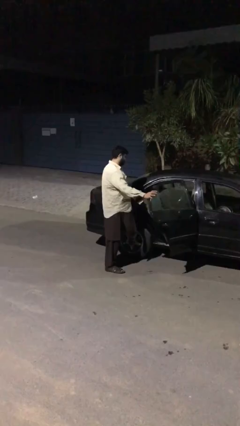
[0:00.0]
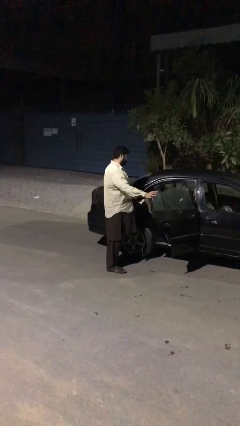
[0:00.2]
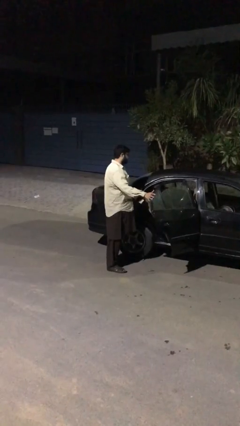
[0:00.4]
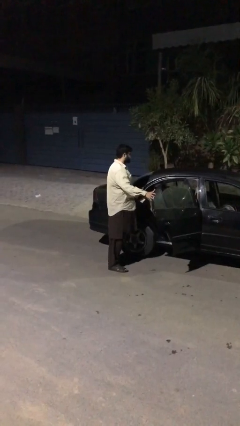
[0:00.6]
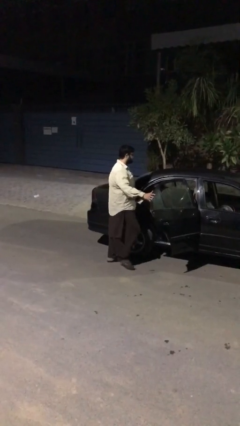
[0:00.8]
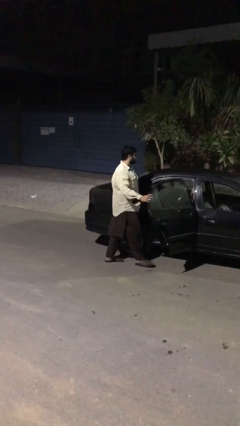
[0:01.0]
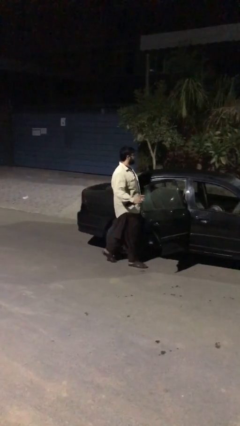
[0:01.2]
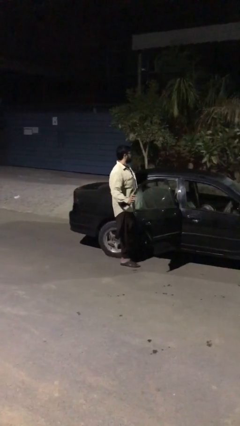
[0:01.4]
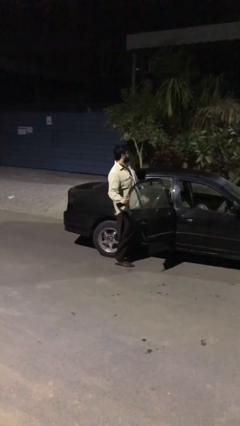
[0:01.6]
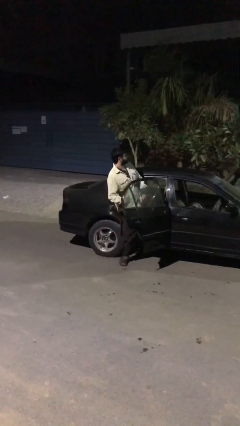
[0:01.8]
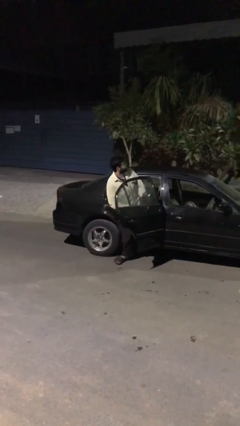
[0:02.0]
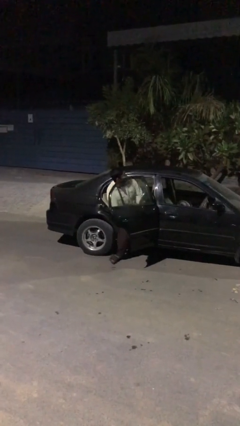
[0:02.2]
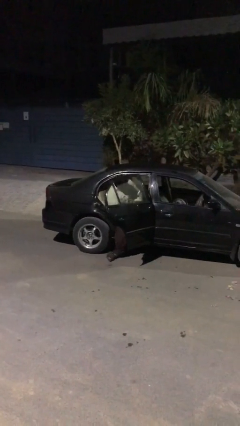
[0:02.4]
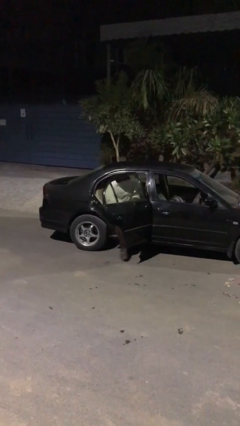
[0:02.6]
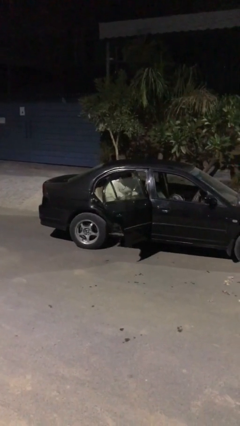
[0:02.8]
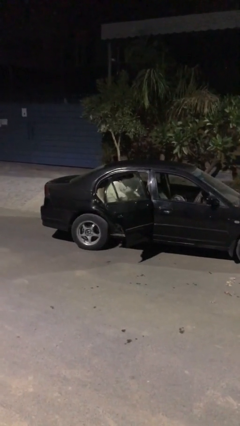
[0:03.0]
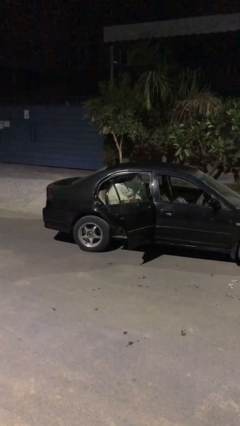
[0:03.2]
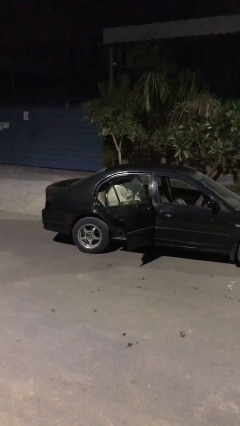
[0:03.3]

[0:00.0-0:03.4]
person enters car

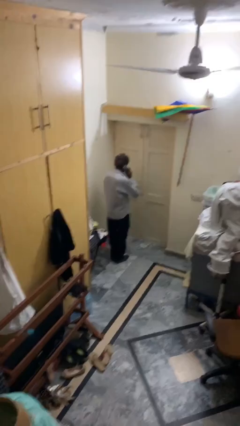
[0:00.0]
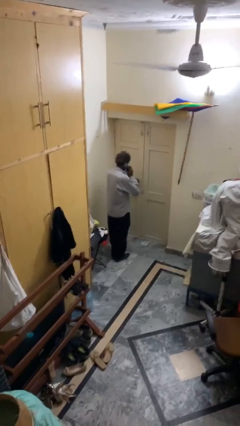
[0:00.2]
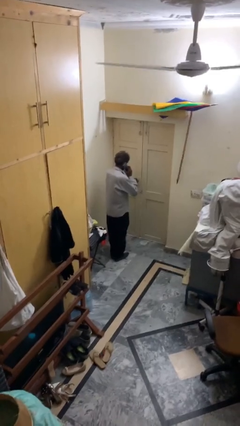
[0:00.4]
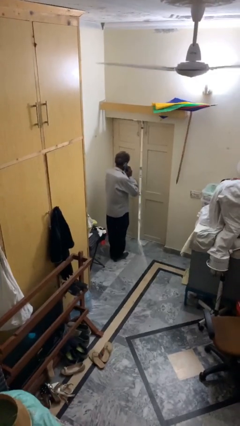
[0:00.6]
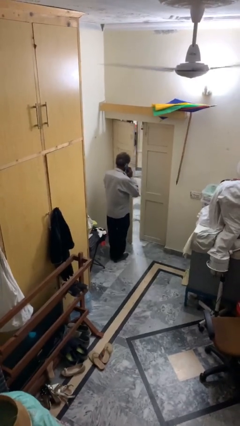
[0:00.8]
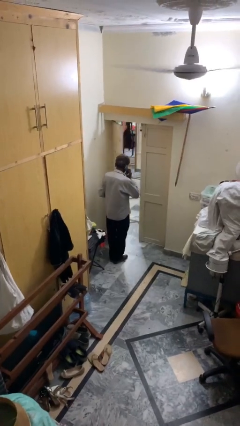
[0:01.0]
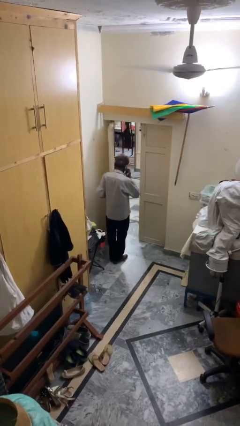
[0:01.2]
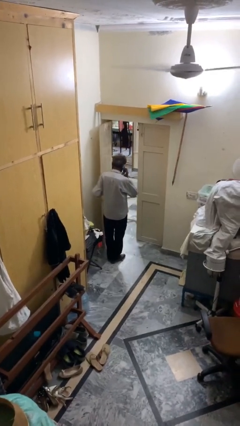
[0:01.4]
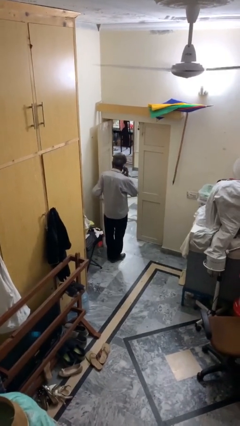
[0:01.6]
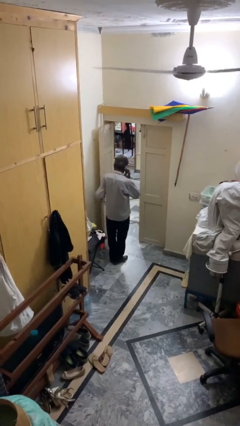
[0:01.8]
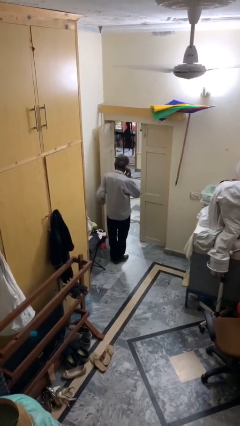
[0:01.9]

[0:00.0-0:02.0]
person opens facility door

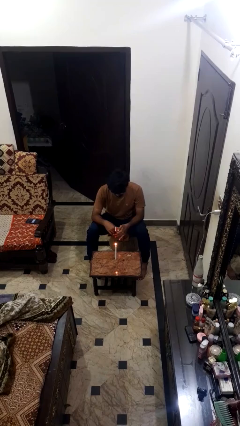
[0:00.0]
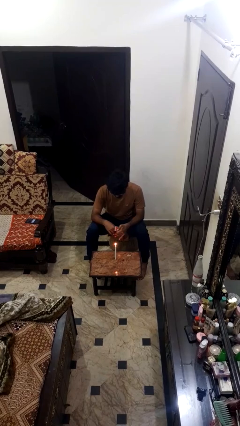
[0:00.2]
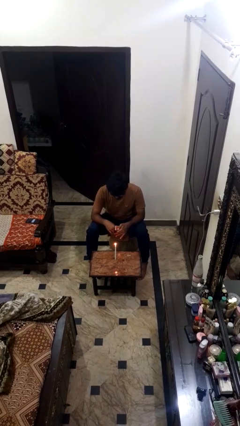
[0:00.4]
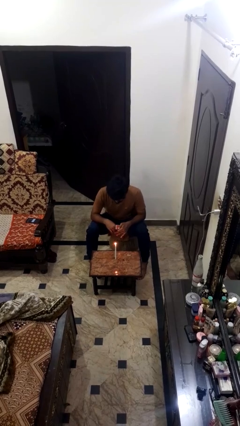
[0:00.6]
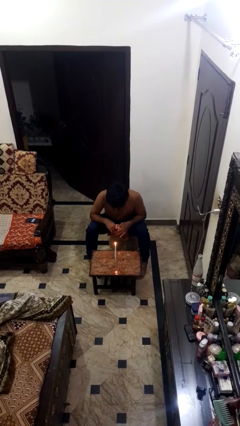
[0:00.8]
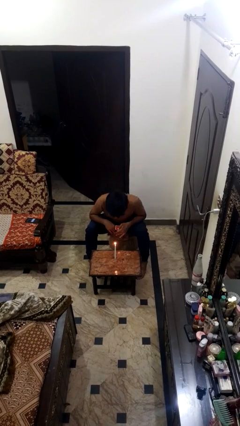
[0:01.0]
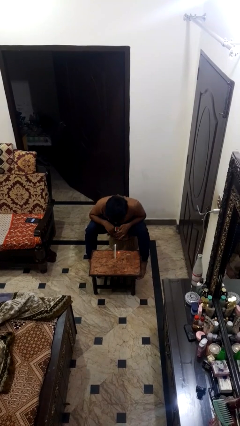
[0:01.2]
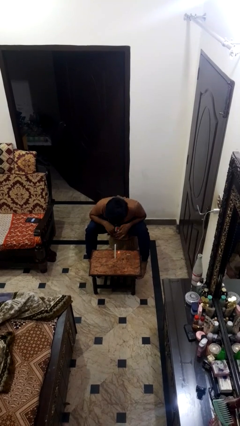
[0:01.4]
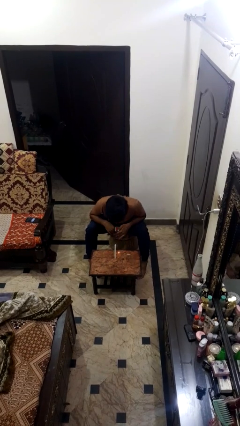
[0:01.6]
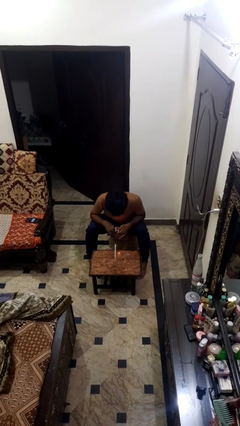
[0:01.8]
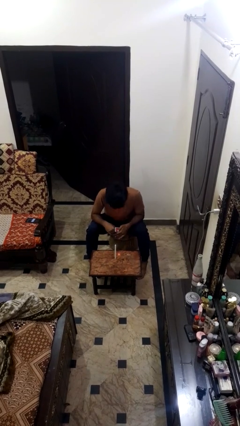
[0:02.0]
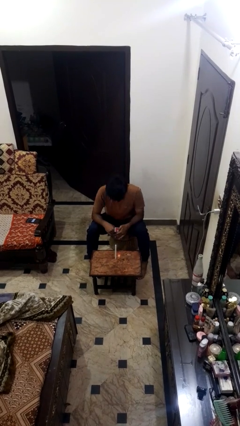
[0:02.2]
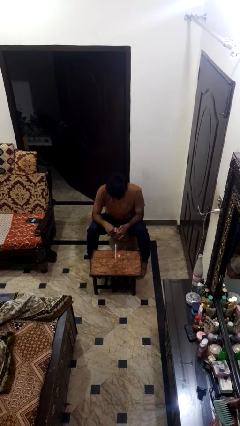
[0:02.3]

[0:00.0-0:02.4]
person extinguishes candle

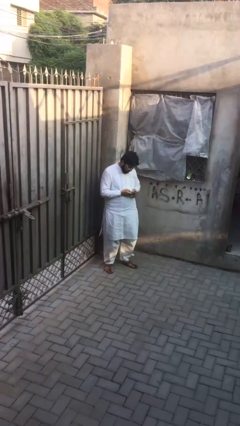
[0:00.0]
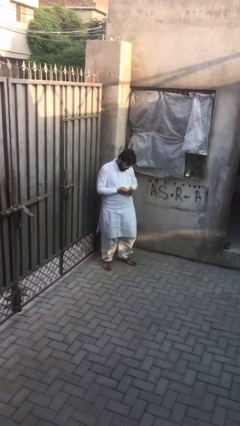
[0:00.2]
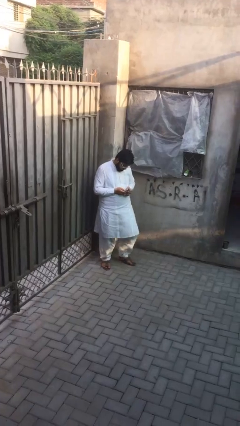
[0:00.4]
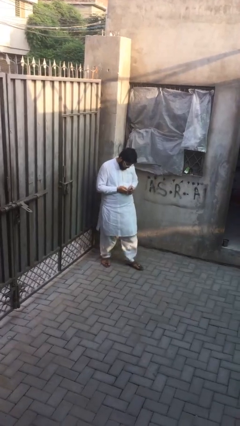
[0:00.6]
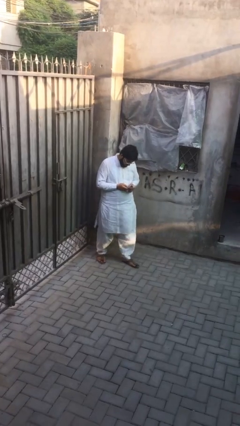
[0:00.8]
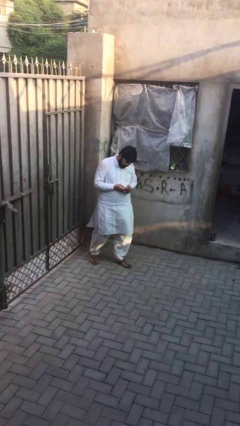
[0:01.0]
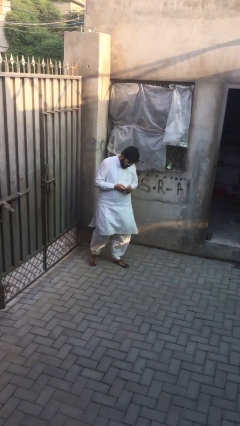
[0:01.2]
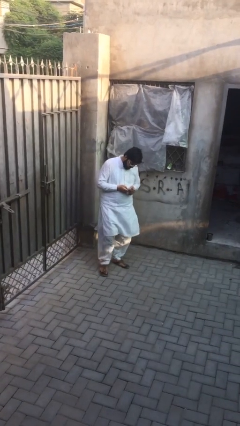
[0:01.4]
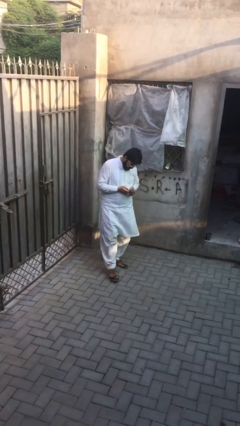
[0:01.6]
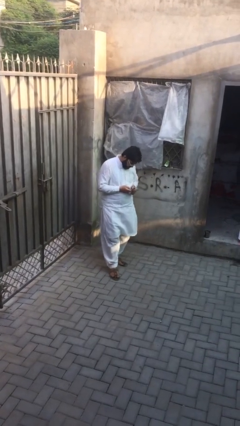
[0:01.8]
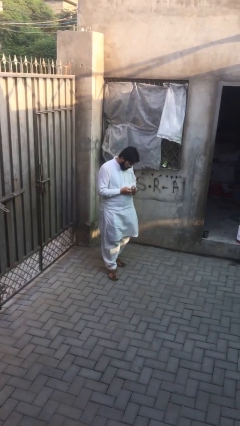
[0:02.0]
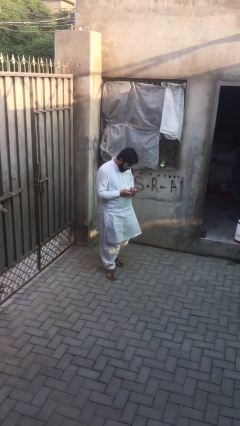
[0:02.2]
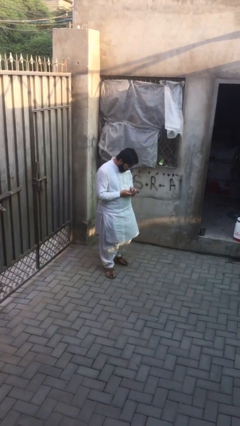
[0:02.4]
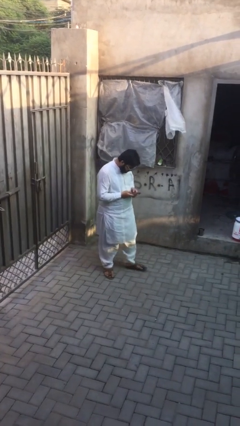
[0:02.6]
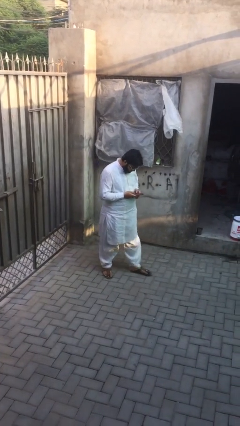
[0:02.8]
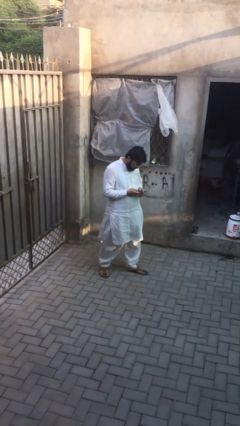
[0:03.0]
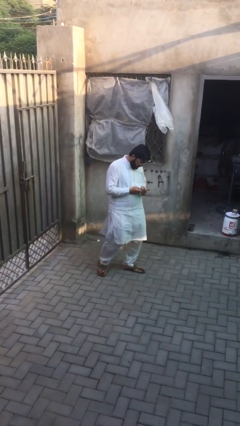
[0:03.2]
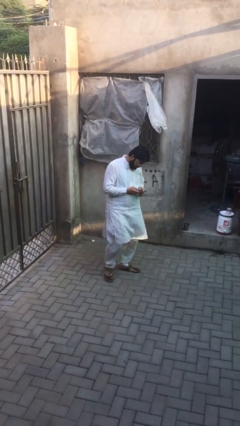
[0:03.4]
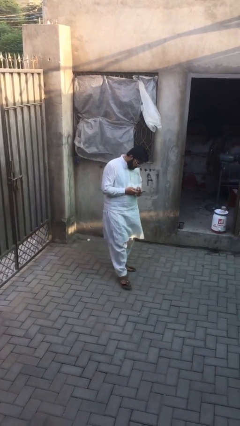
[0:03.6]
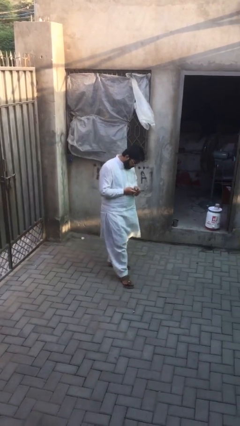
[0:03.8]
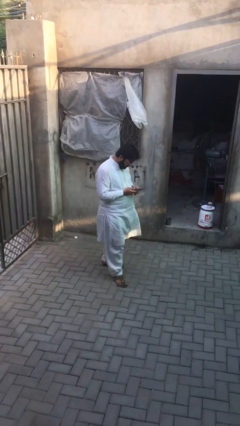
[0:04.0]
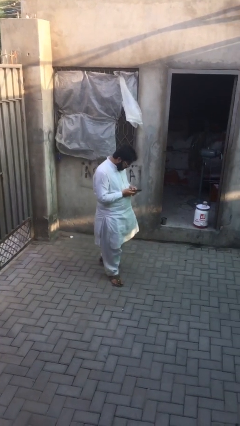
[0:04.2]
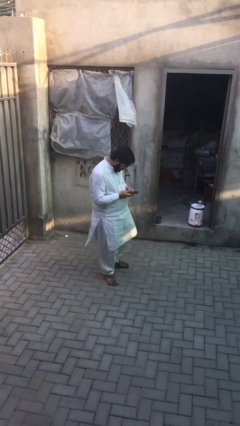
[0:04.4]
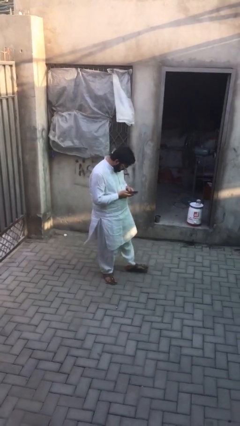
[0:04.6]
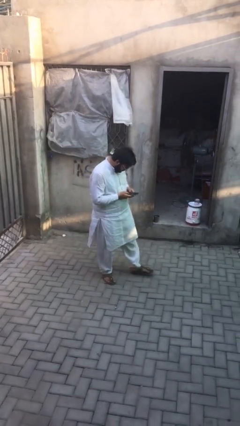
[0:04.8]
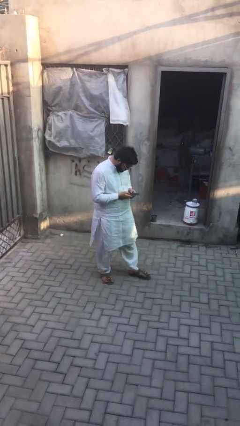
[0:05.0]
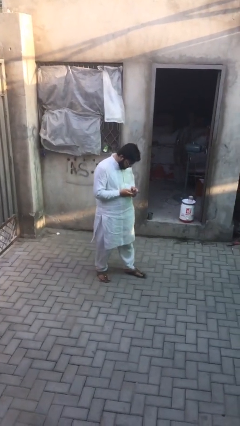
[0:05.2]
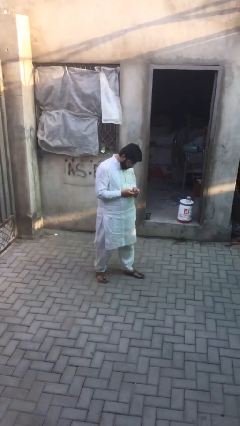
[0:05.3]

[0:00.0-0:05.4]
person texts on phone

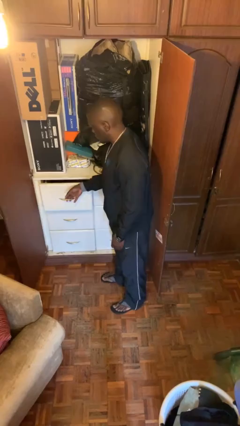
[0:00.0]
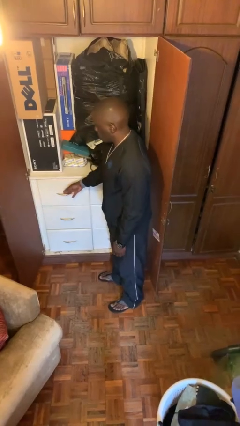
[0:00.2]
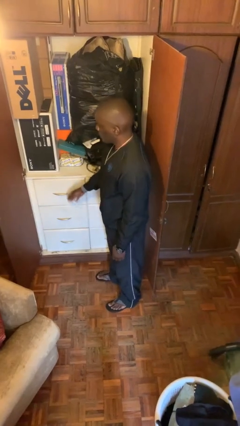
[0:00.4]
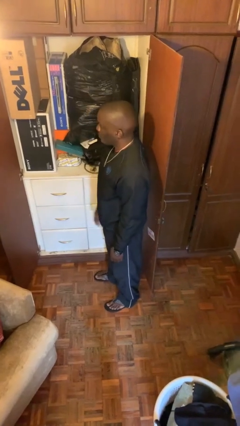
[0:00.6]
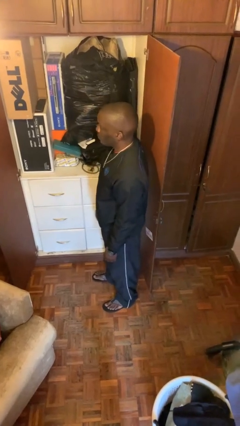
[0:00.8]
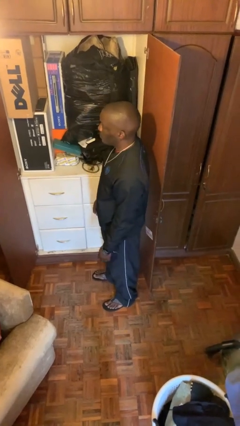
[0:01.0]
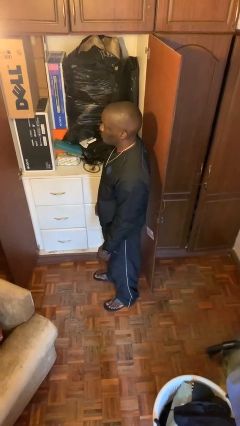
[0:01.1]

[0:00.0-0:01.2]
person closes dresser drawer

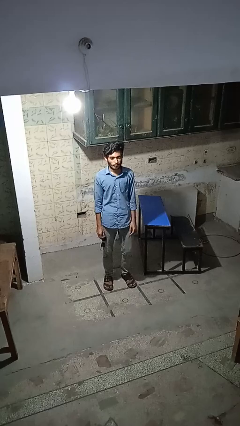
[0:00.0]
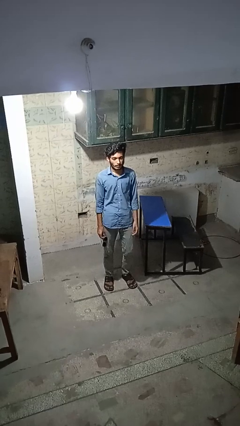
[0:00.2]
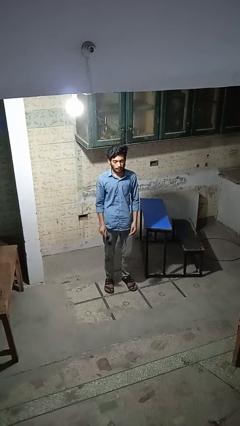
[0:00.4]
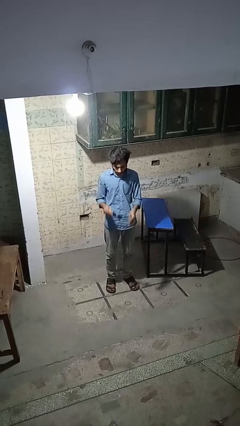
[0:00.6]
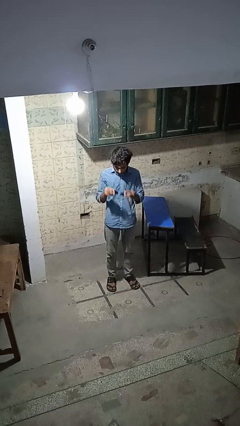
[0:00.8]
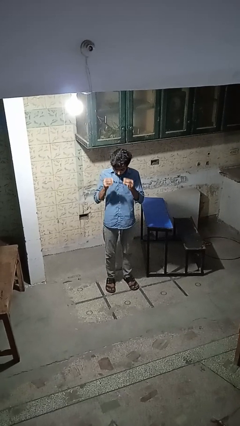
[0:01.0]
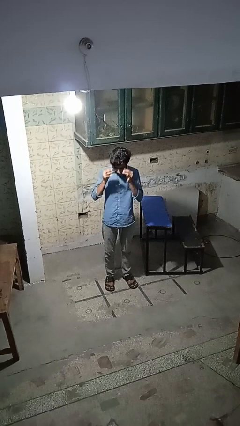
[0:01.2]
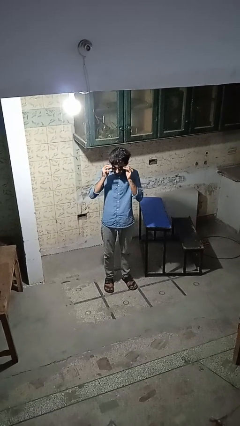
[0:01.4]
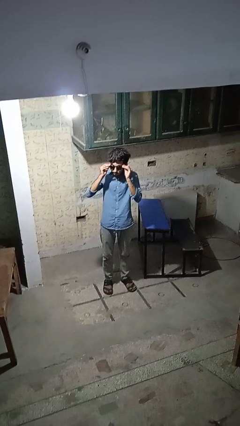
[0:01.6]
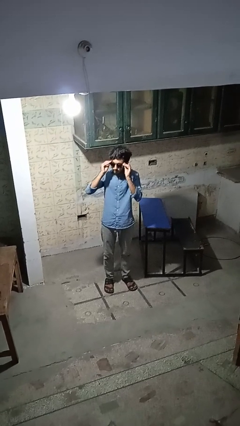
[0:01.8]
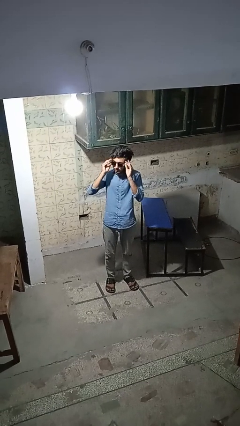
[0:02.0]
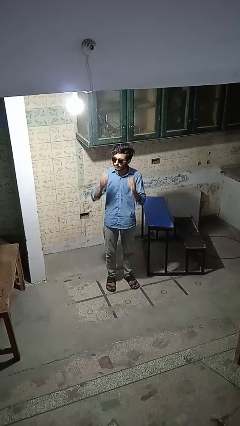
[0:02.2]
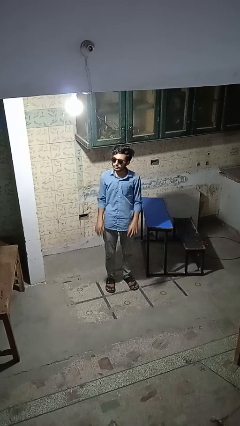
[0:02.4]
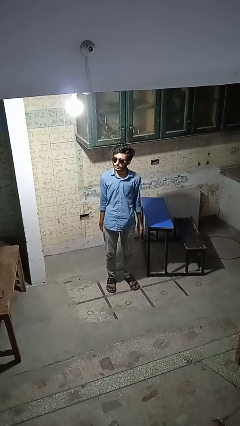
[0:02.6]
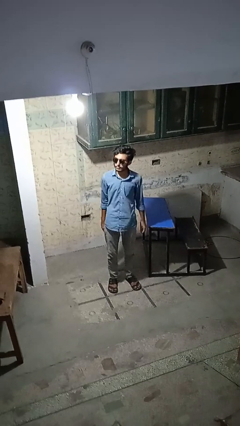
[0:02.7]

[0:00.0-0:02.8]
person puts on sunglasses

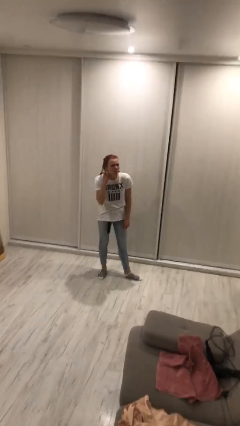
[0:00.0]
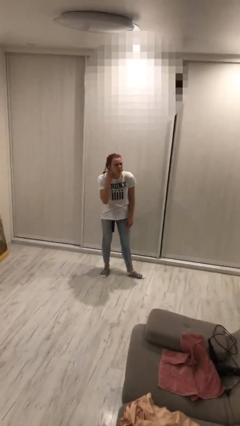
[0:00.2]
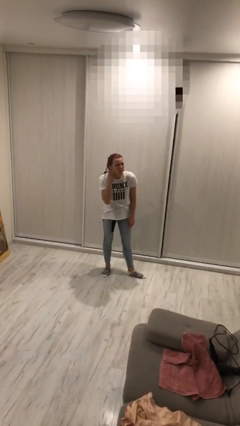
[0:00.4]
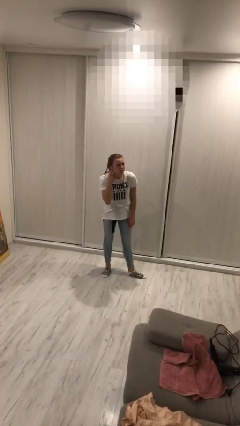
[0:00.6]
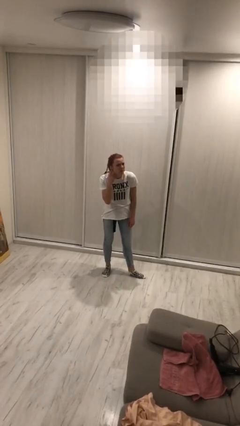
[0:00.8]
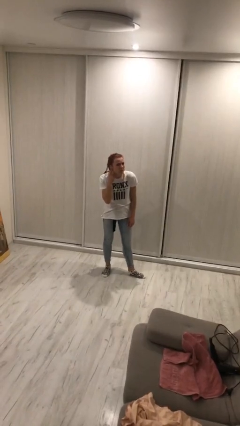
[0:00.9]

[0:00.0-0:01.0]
person gestures listen closely
